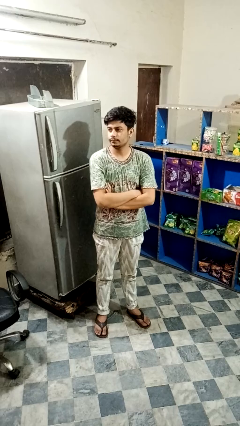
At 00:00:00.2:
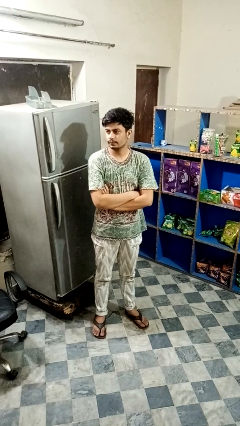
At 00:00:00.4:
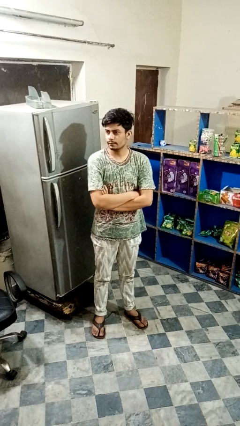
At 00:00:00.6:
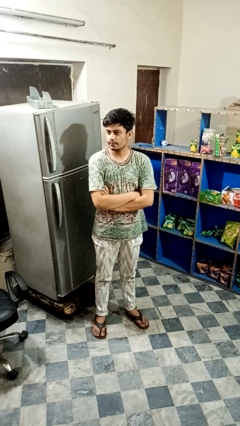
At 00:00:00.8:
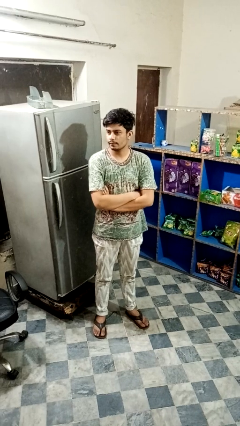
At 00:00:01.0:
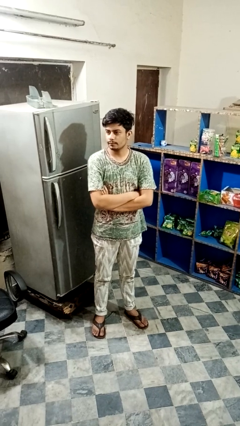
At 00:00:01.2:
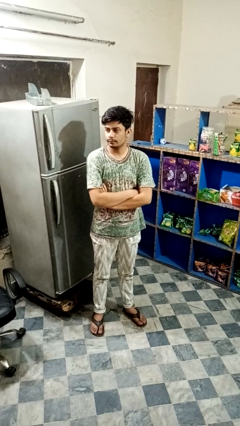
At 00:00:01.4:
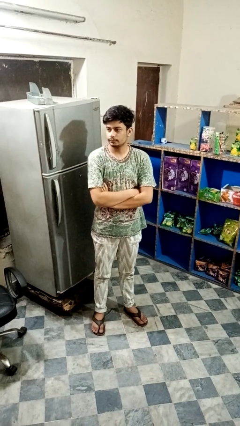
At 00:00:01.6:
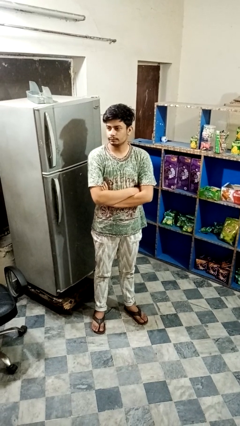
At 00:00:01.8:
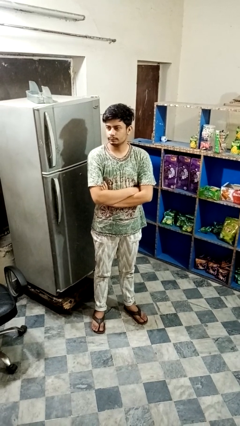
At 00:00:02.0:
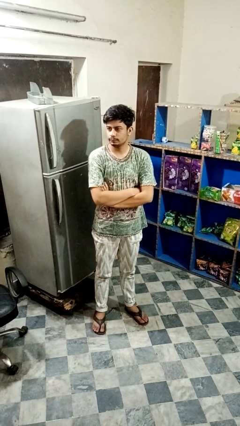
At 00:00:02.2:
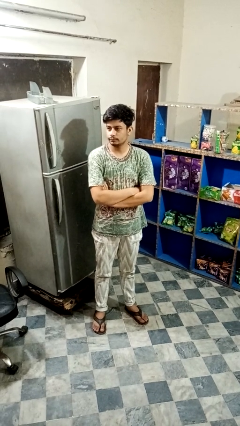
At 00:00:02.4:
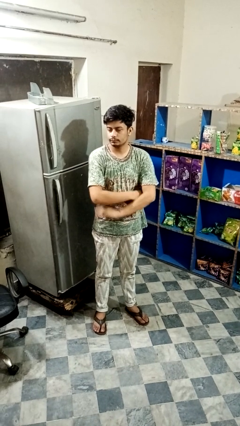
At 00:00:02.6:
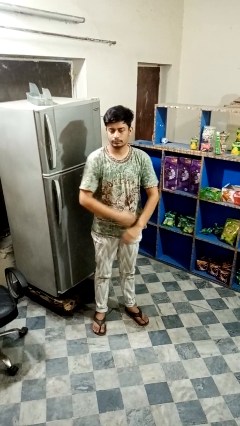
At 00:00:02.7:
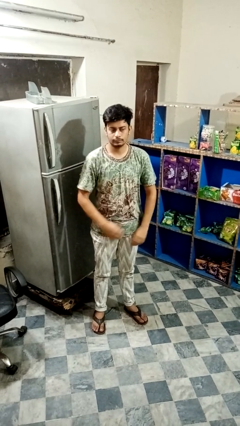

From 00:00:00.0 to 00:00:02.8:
person crosses arms

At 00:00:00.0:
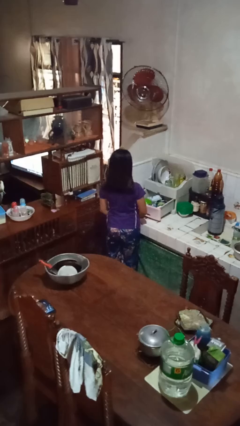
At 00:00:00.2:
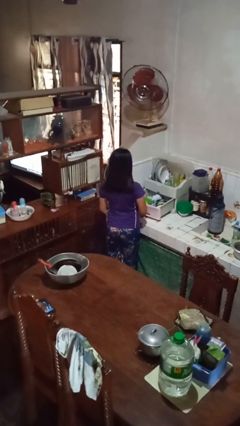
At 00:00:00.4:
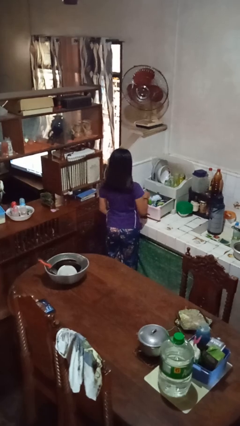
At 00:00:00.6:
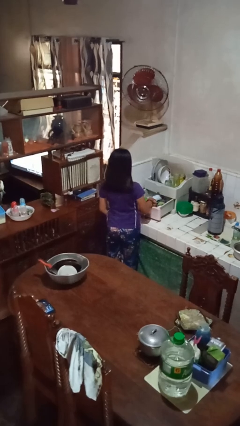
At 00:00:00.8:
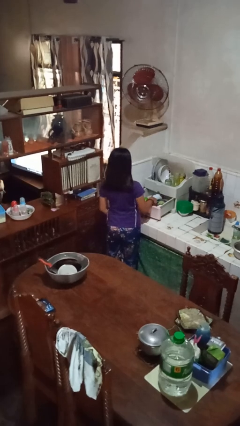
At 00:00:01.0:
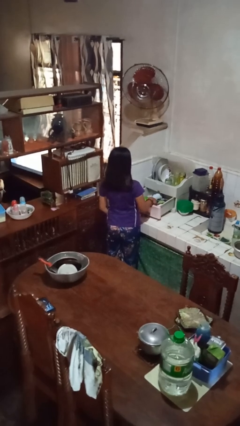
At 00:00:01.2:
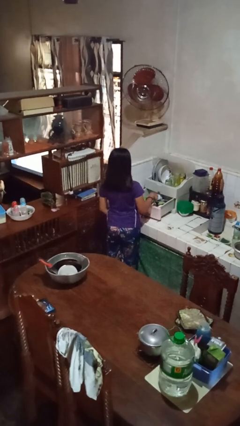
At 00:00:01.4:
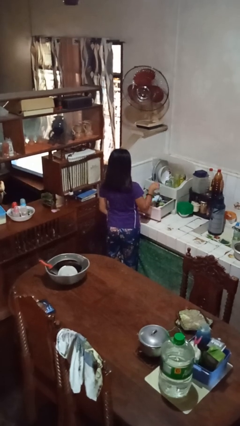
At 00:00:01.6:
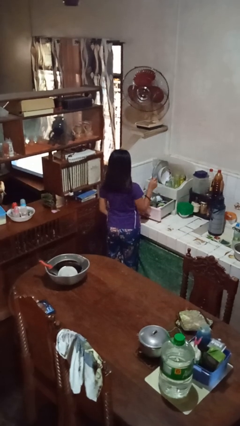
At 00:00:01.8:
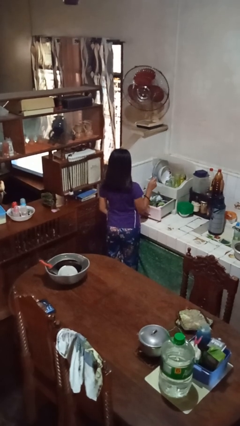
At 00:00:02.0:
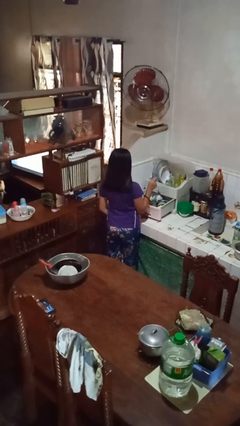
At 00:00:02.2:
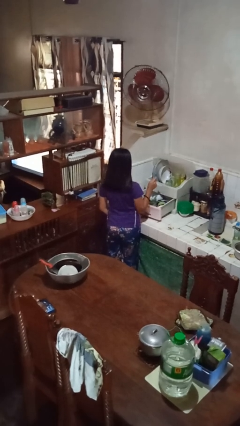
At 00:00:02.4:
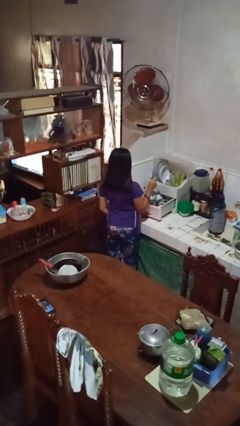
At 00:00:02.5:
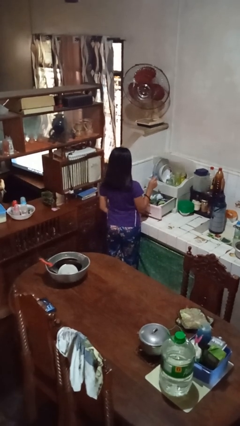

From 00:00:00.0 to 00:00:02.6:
person takes object from kitchen drawer

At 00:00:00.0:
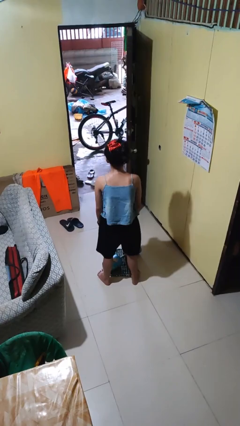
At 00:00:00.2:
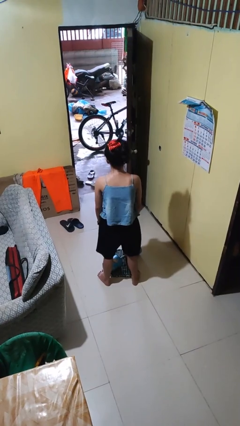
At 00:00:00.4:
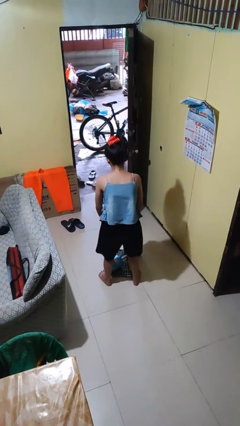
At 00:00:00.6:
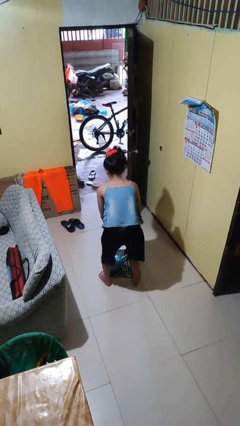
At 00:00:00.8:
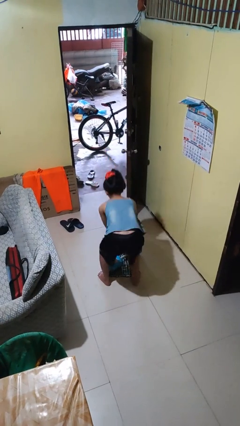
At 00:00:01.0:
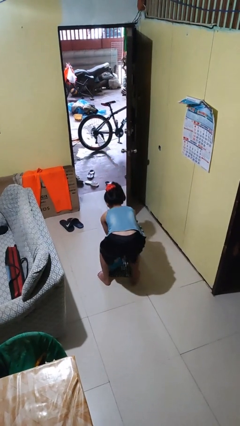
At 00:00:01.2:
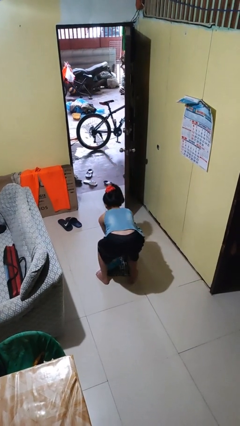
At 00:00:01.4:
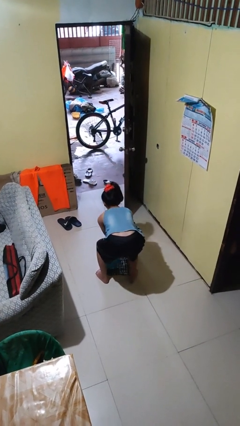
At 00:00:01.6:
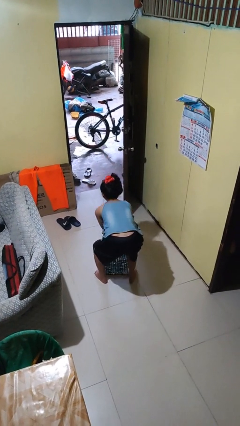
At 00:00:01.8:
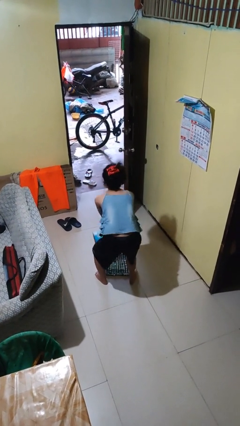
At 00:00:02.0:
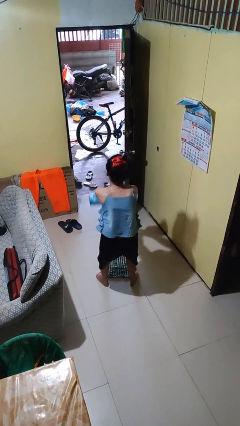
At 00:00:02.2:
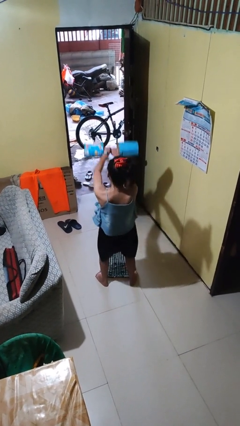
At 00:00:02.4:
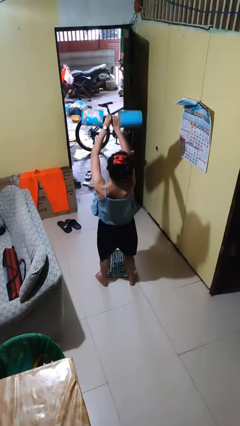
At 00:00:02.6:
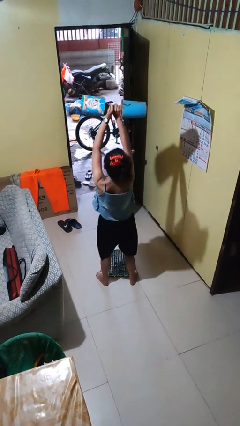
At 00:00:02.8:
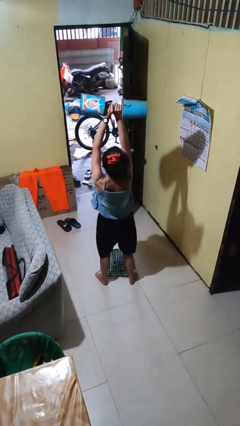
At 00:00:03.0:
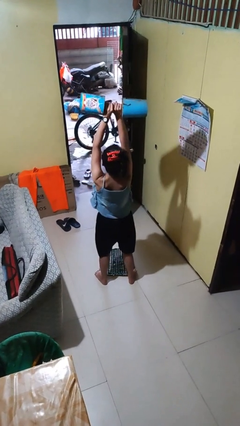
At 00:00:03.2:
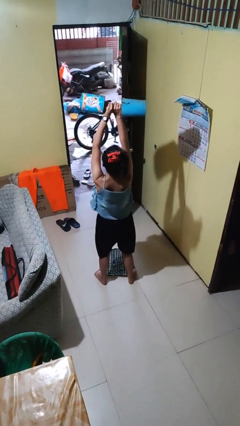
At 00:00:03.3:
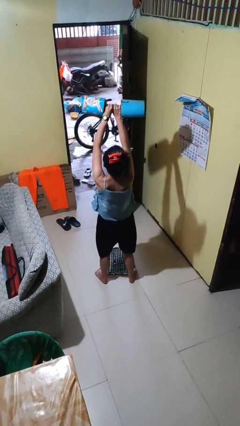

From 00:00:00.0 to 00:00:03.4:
person lifts dumbbells

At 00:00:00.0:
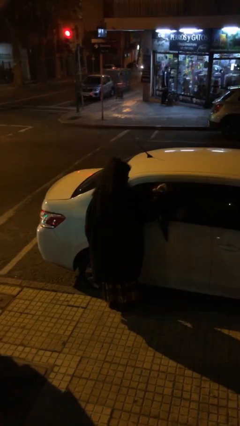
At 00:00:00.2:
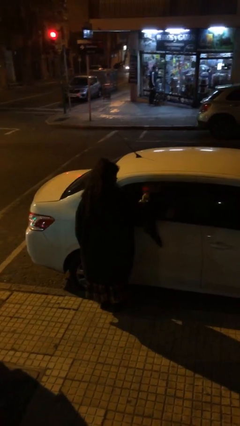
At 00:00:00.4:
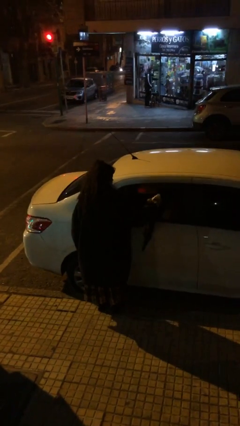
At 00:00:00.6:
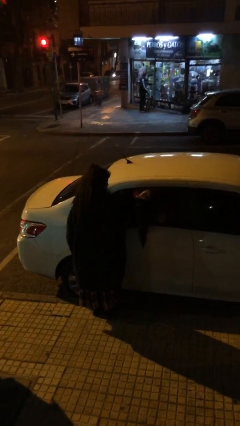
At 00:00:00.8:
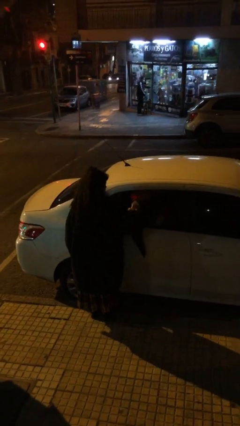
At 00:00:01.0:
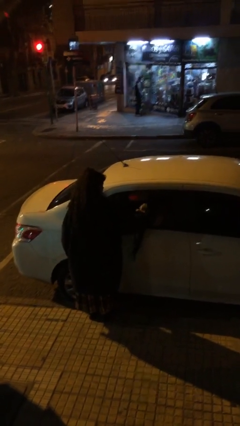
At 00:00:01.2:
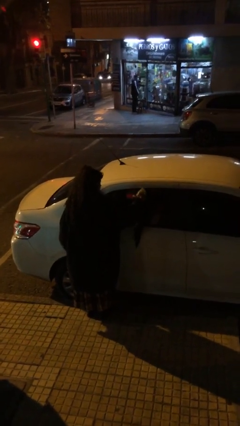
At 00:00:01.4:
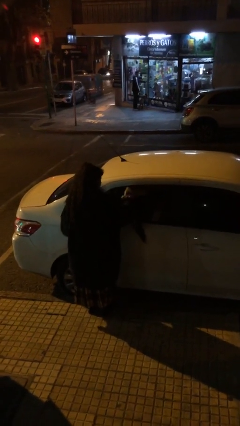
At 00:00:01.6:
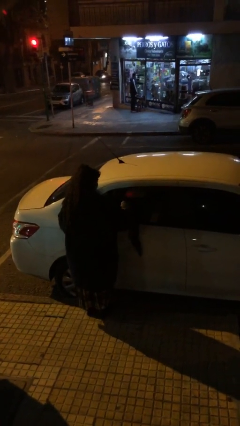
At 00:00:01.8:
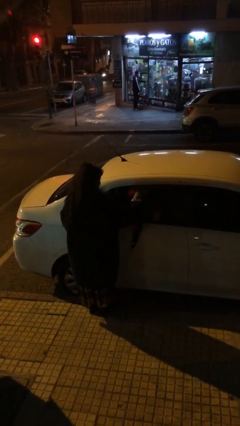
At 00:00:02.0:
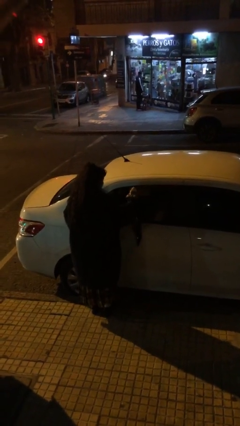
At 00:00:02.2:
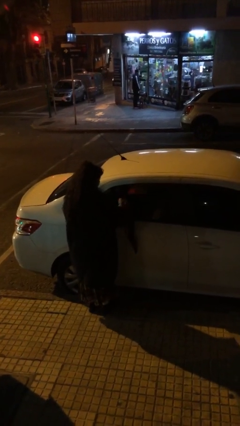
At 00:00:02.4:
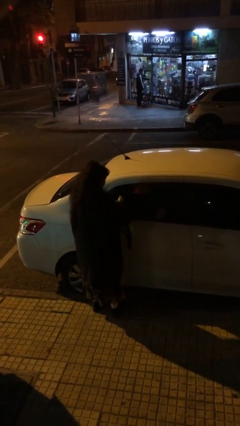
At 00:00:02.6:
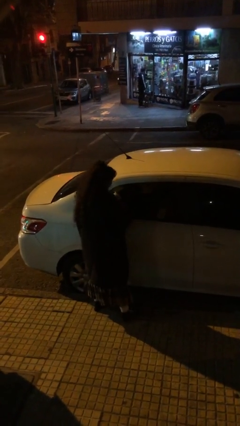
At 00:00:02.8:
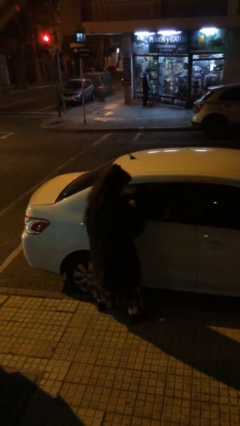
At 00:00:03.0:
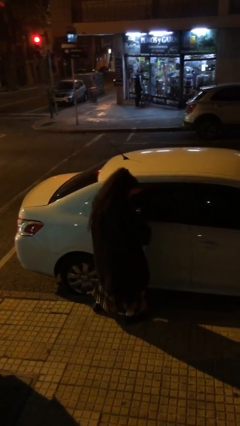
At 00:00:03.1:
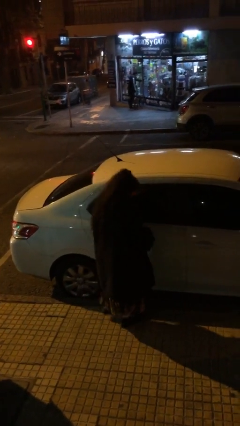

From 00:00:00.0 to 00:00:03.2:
person polishes car with rag

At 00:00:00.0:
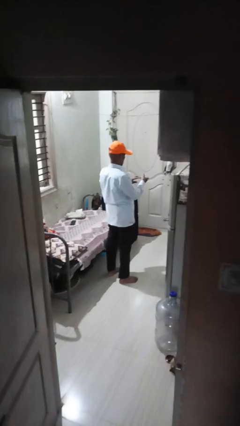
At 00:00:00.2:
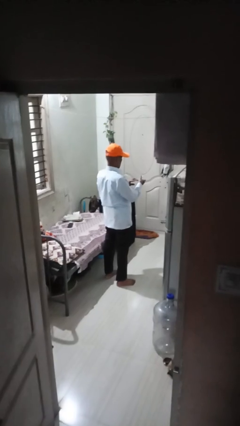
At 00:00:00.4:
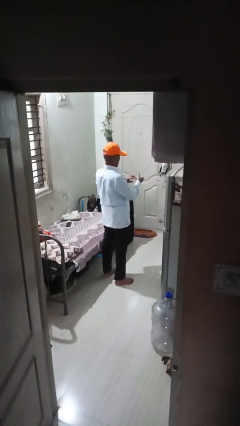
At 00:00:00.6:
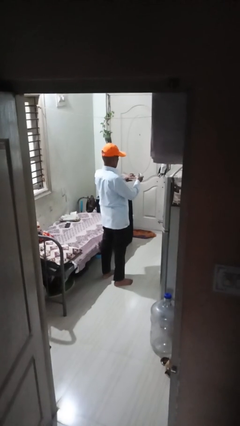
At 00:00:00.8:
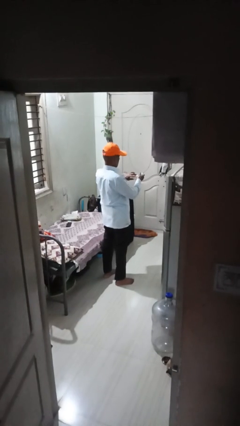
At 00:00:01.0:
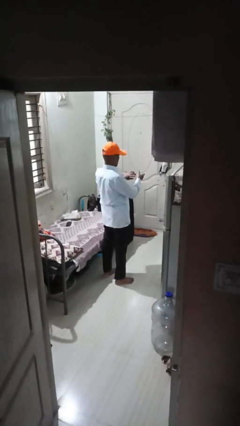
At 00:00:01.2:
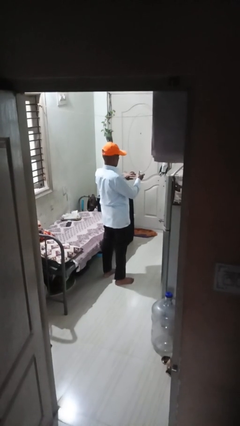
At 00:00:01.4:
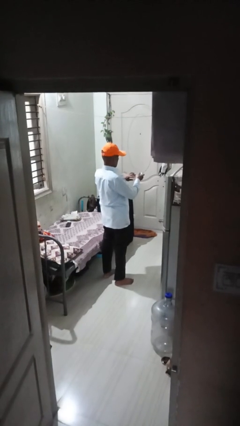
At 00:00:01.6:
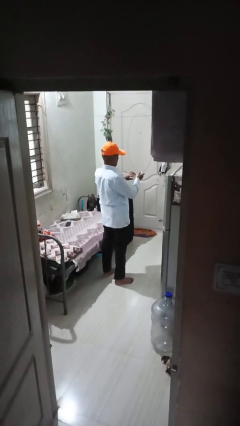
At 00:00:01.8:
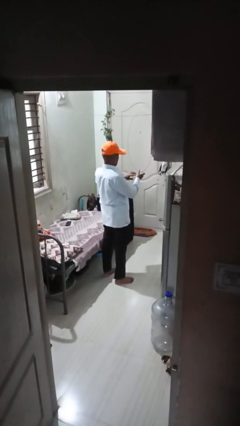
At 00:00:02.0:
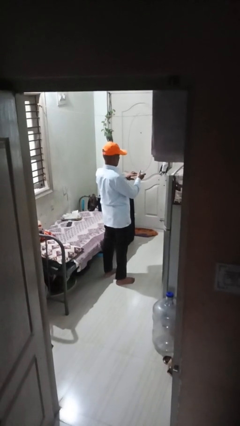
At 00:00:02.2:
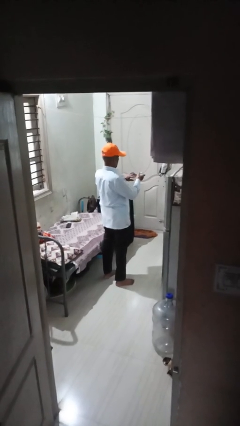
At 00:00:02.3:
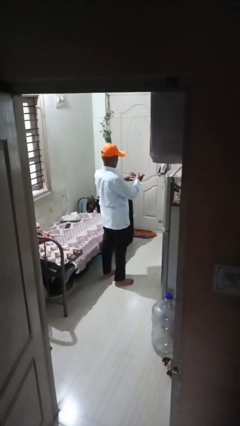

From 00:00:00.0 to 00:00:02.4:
person clips fingernails

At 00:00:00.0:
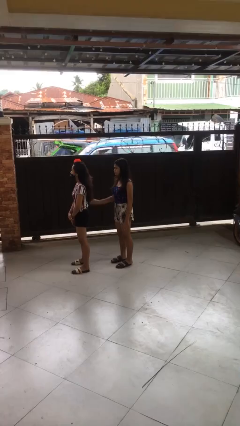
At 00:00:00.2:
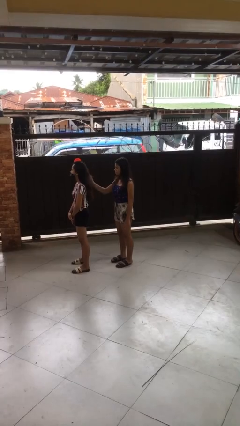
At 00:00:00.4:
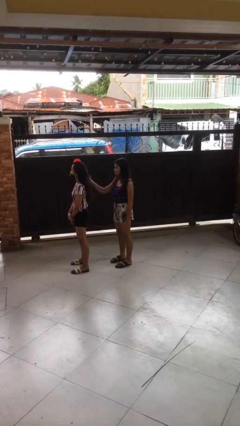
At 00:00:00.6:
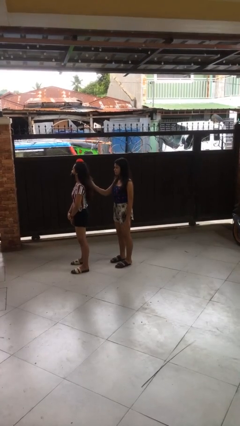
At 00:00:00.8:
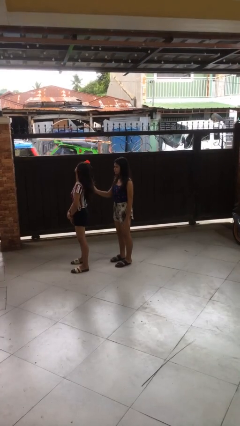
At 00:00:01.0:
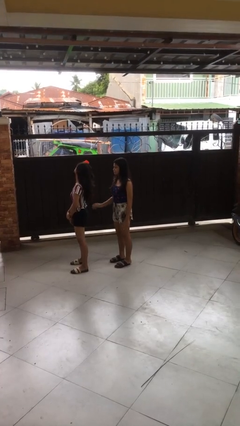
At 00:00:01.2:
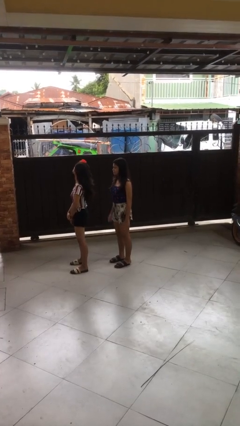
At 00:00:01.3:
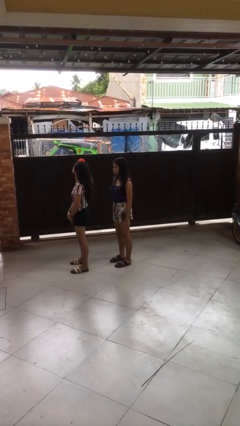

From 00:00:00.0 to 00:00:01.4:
person grabs person by hair

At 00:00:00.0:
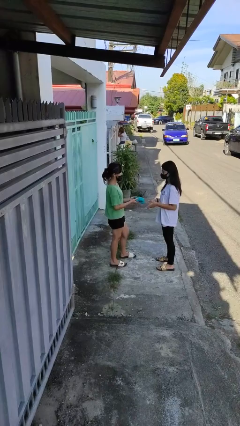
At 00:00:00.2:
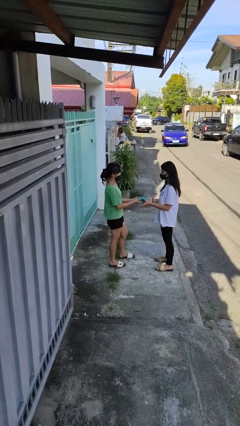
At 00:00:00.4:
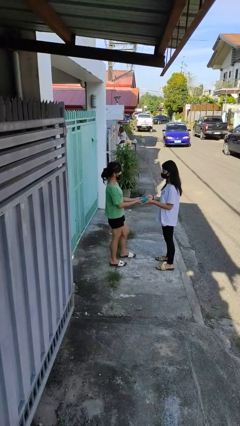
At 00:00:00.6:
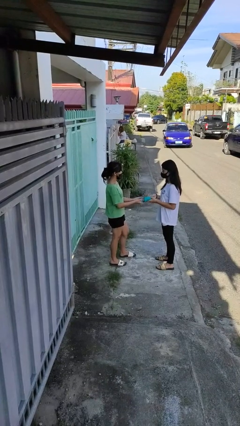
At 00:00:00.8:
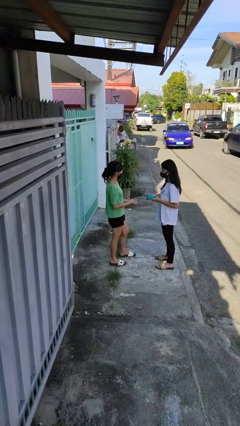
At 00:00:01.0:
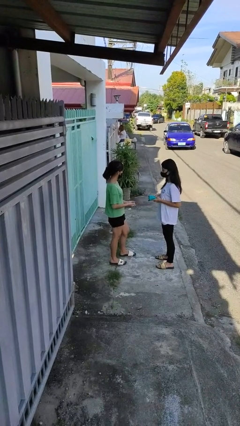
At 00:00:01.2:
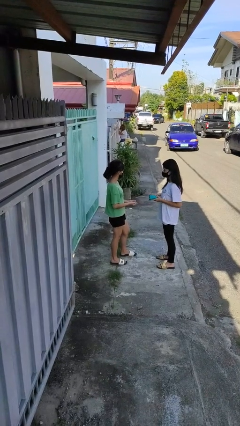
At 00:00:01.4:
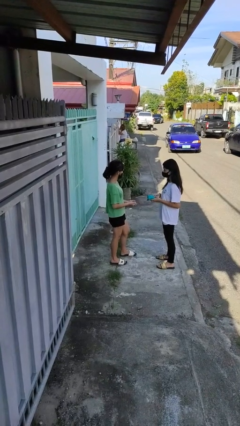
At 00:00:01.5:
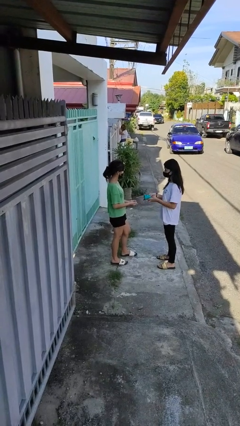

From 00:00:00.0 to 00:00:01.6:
person transfers object to person
